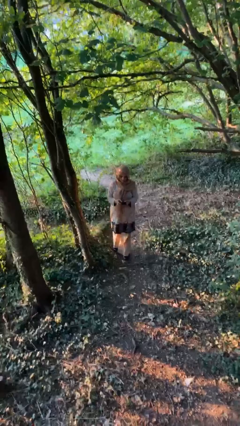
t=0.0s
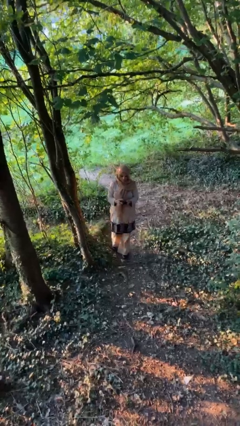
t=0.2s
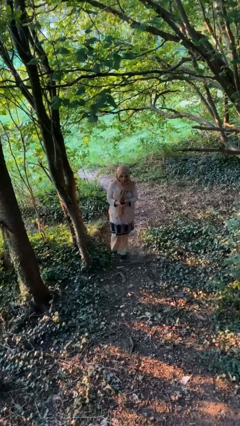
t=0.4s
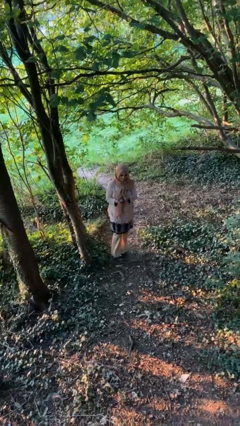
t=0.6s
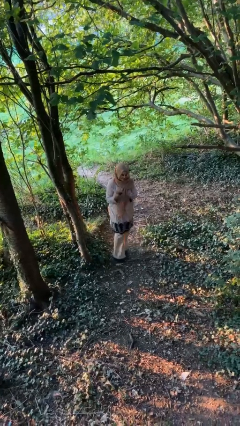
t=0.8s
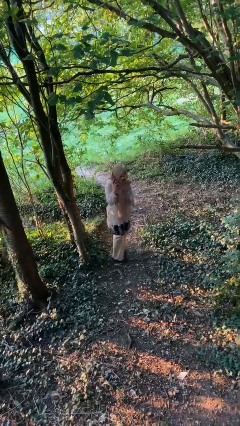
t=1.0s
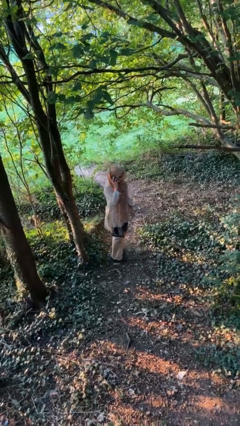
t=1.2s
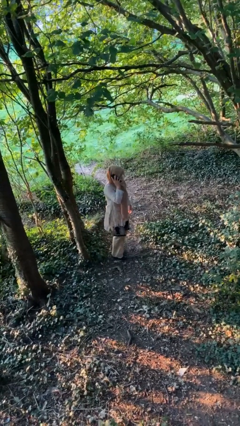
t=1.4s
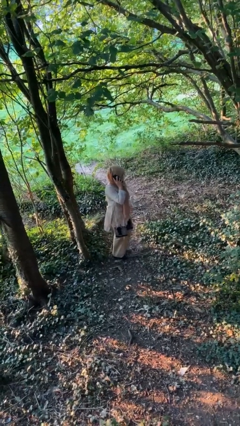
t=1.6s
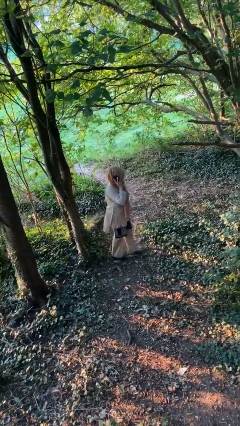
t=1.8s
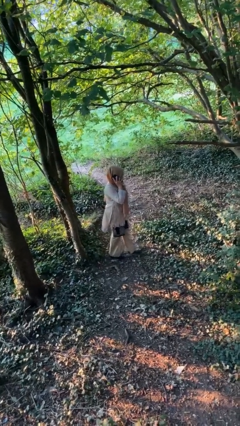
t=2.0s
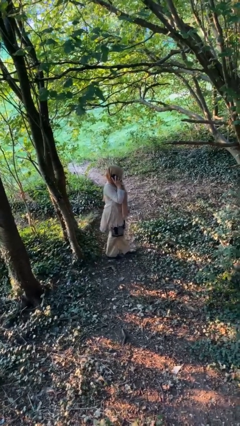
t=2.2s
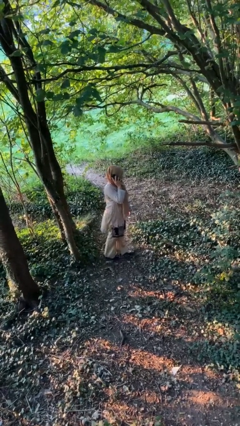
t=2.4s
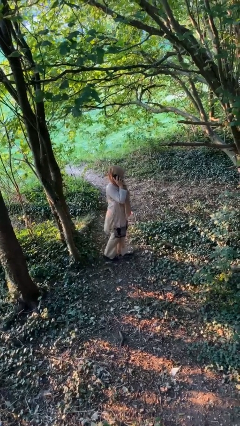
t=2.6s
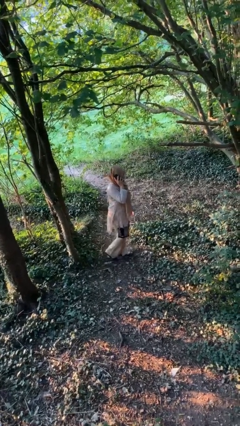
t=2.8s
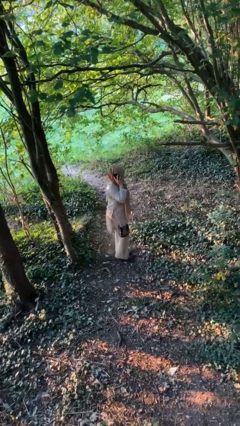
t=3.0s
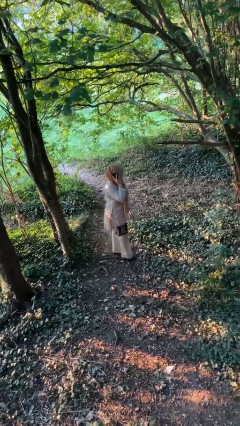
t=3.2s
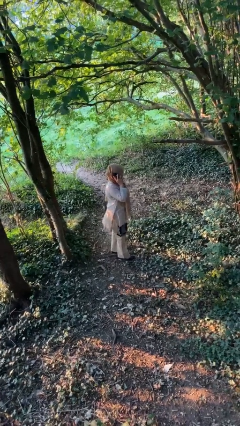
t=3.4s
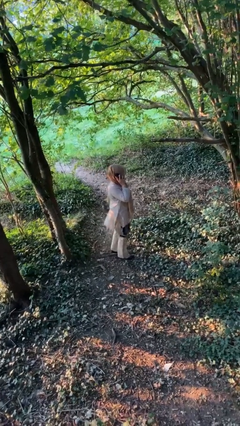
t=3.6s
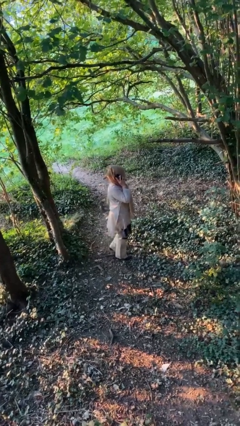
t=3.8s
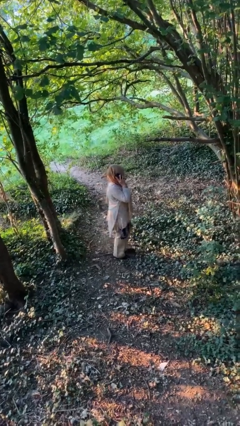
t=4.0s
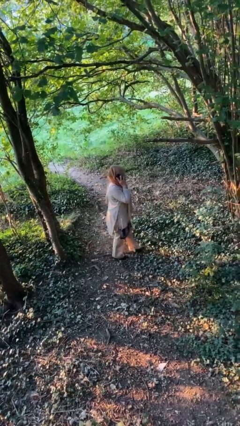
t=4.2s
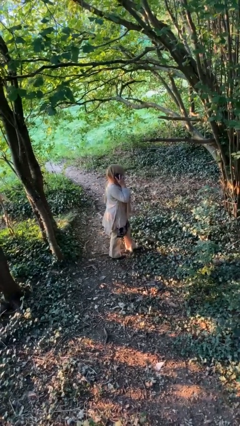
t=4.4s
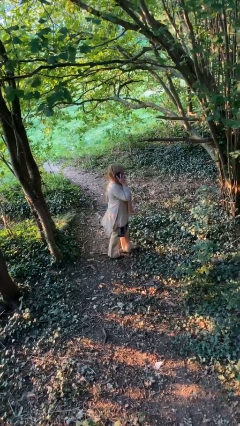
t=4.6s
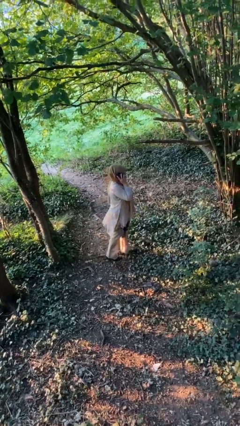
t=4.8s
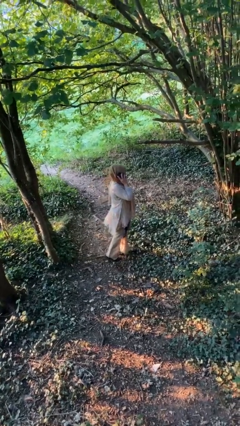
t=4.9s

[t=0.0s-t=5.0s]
person talks on phone

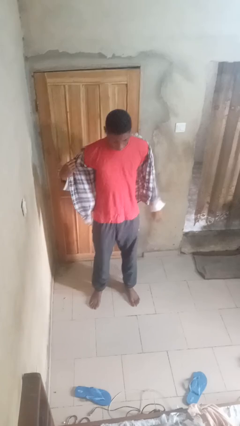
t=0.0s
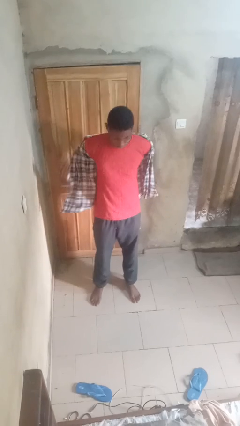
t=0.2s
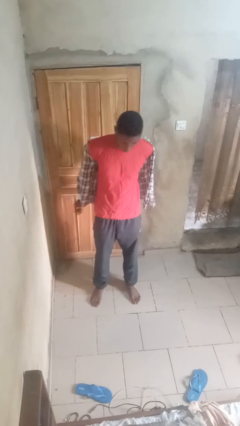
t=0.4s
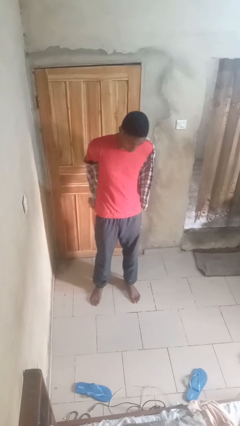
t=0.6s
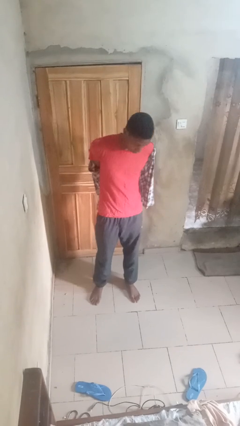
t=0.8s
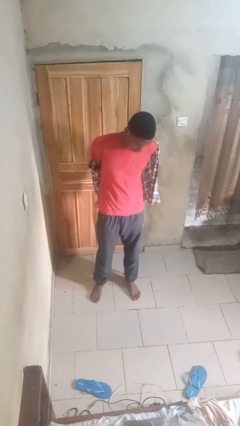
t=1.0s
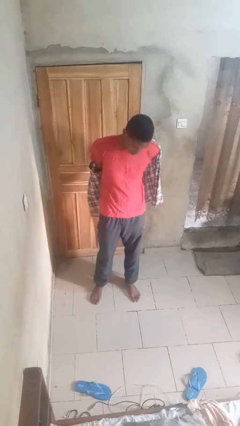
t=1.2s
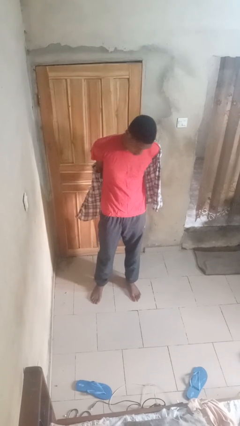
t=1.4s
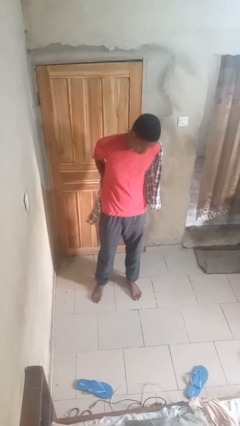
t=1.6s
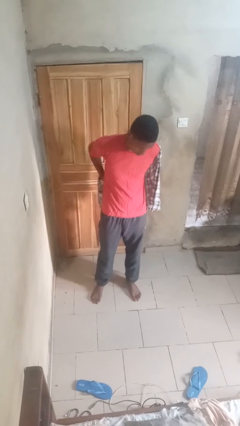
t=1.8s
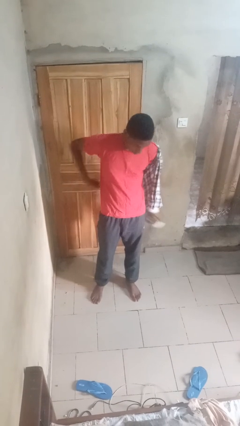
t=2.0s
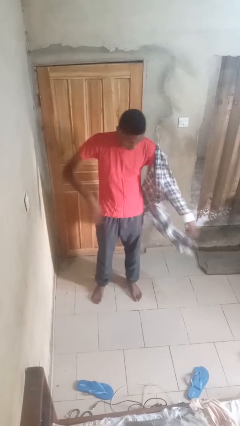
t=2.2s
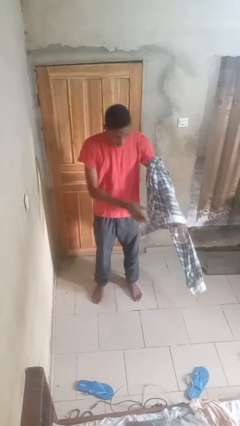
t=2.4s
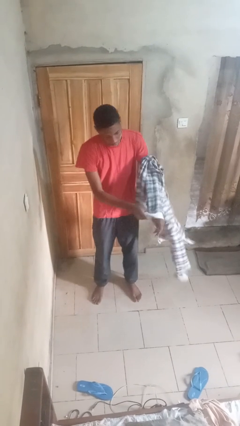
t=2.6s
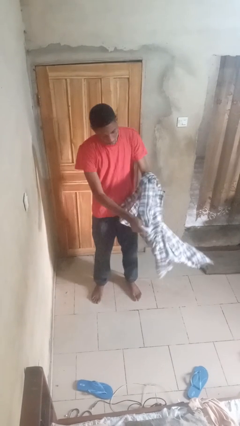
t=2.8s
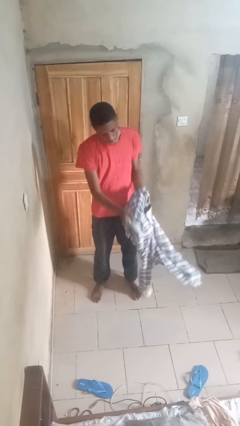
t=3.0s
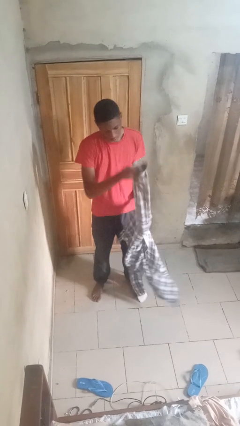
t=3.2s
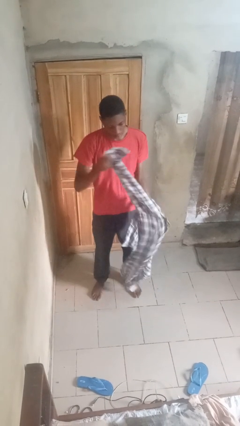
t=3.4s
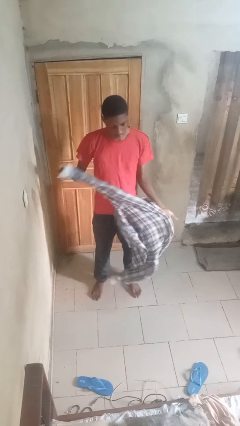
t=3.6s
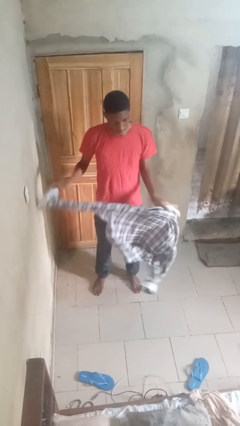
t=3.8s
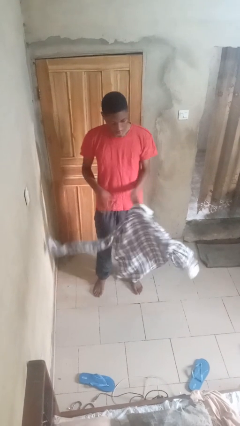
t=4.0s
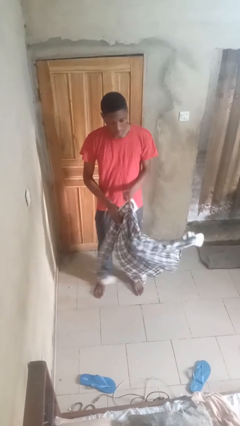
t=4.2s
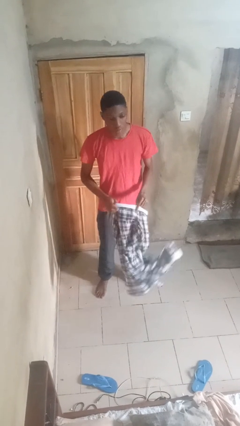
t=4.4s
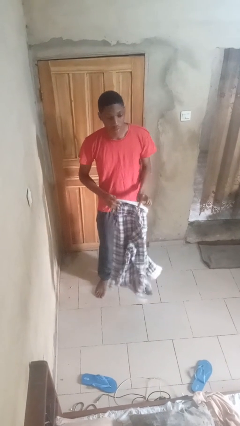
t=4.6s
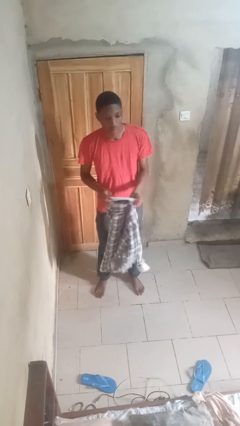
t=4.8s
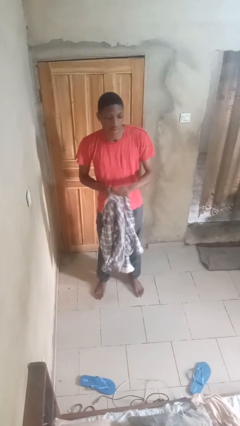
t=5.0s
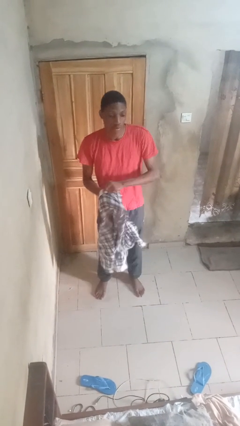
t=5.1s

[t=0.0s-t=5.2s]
person takes off shirt

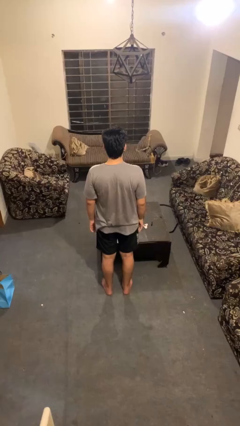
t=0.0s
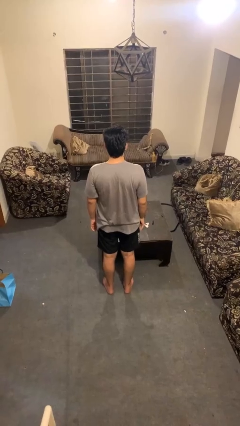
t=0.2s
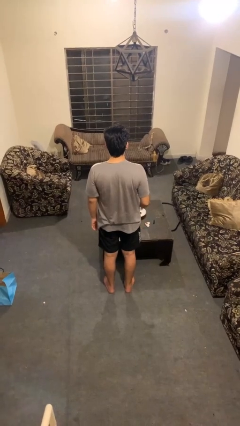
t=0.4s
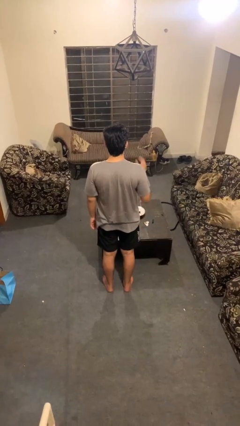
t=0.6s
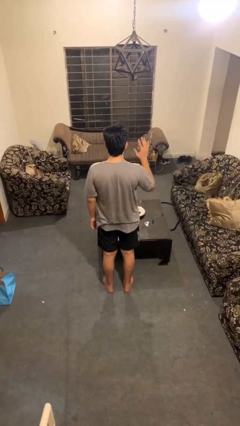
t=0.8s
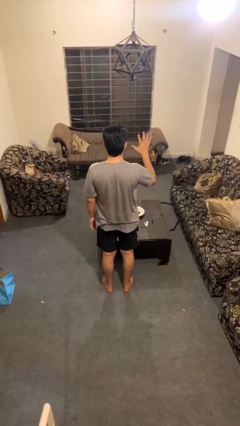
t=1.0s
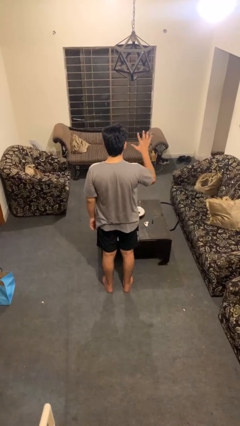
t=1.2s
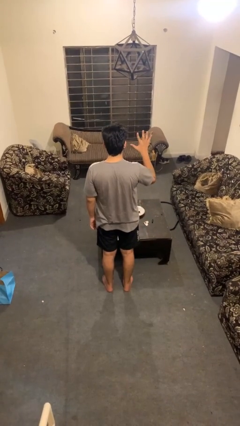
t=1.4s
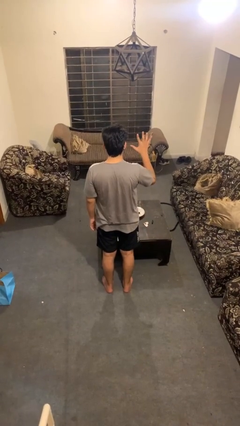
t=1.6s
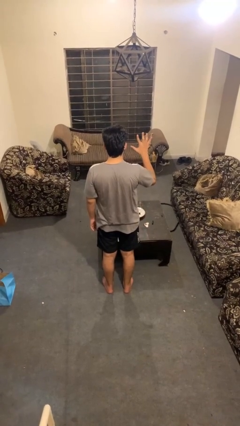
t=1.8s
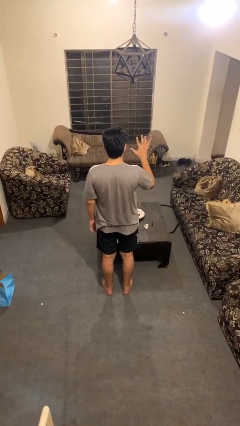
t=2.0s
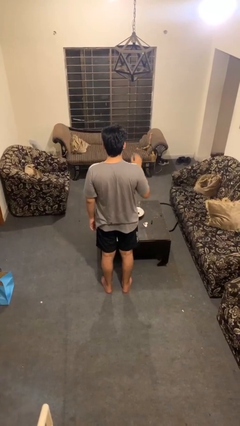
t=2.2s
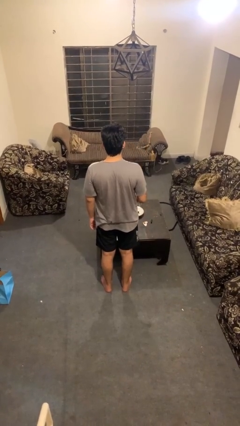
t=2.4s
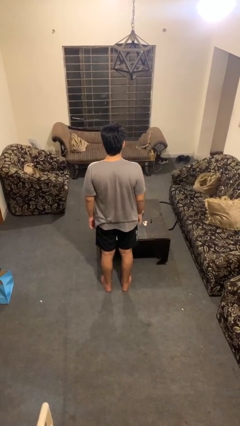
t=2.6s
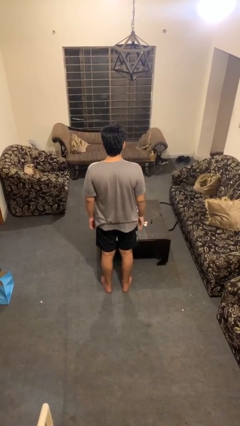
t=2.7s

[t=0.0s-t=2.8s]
person gestures number five

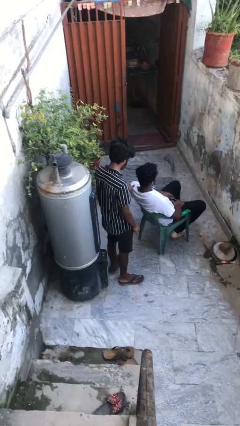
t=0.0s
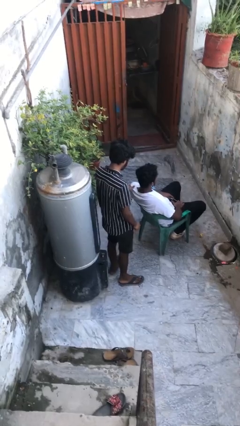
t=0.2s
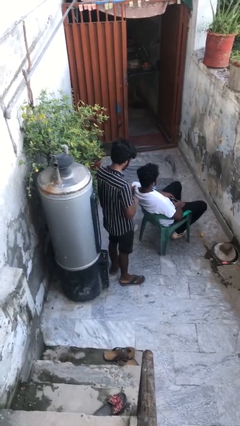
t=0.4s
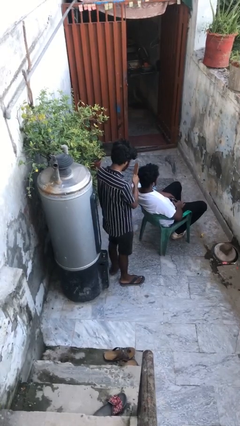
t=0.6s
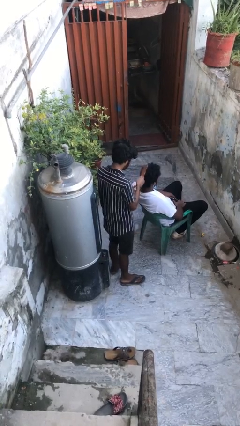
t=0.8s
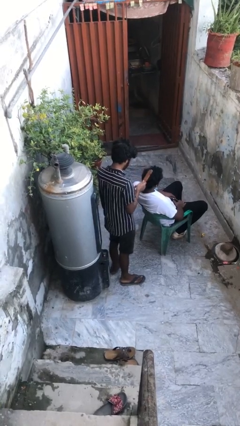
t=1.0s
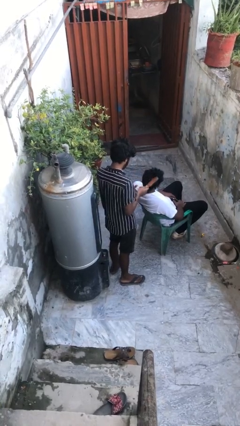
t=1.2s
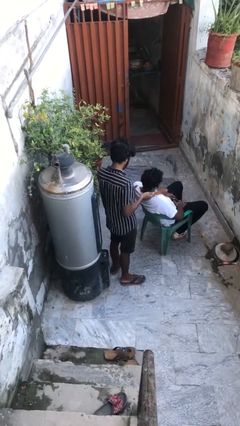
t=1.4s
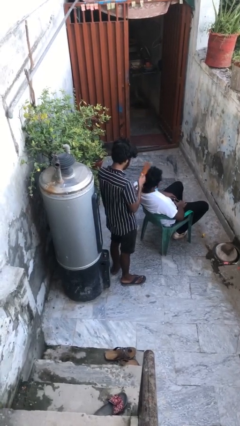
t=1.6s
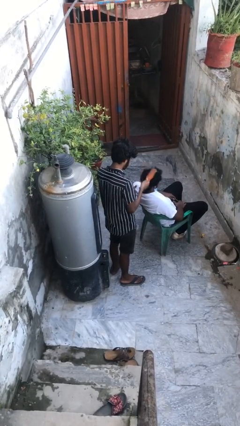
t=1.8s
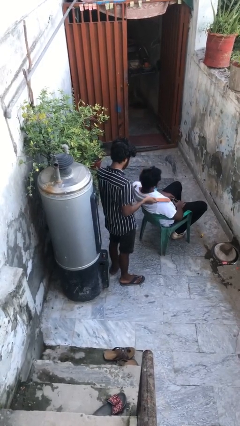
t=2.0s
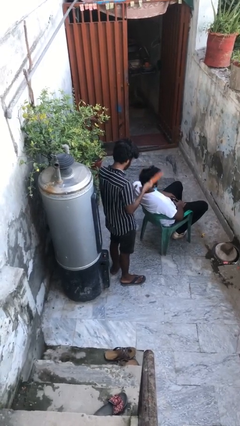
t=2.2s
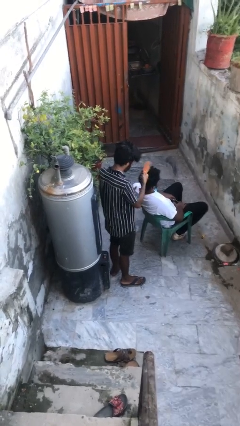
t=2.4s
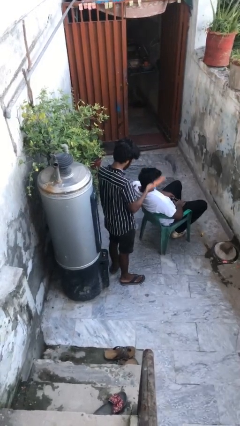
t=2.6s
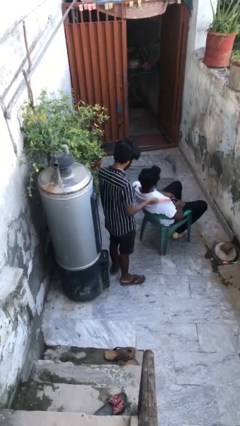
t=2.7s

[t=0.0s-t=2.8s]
person brushes hair of person

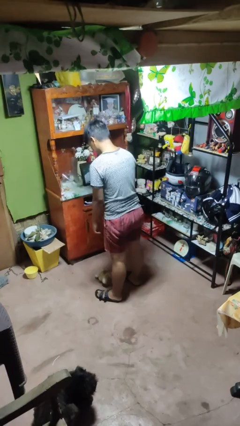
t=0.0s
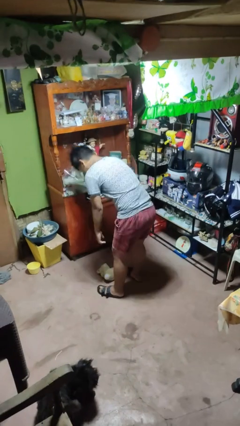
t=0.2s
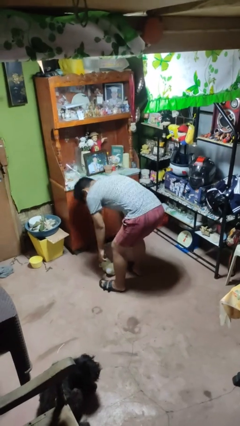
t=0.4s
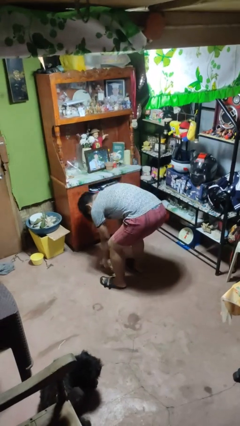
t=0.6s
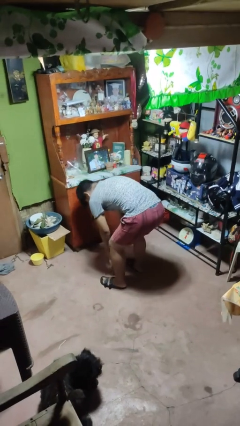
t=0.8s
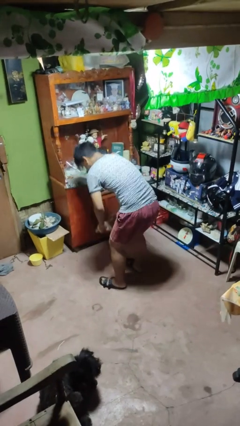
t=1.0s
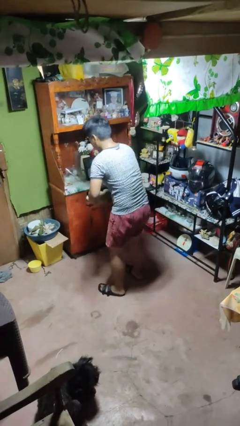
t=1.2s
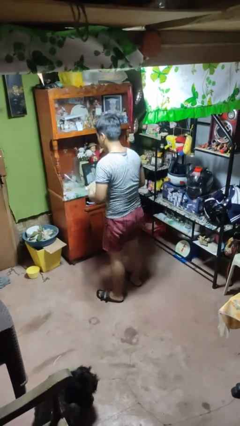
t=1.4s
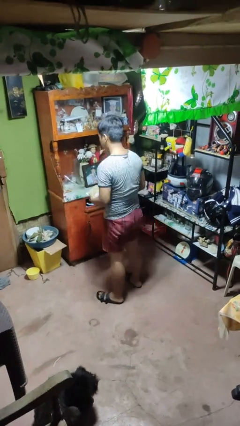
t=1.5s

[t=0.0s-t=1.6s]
person picks up object from floor

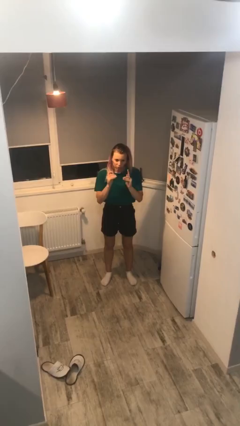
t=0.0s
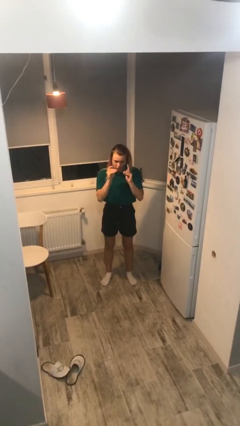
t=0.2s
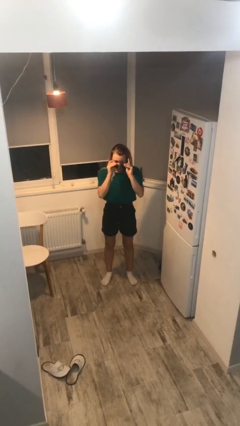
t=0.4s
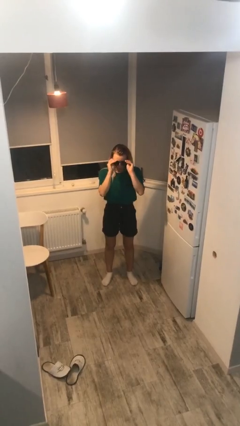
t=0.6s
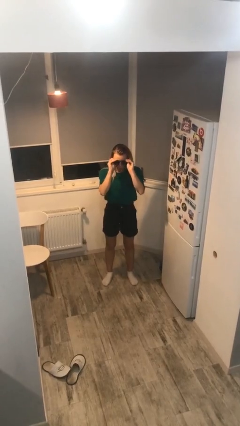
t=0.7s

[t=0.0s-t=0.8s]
person puts on glasses
